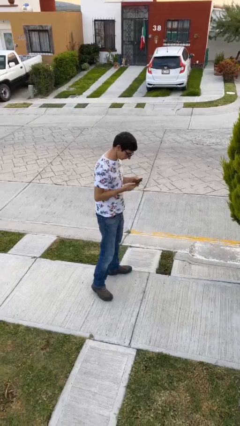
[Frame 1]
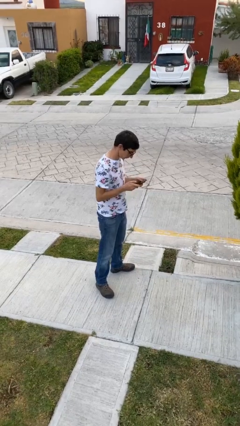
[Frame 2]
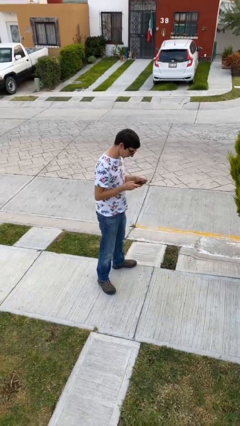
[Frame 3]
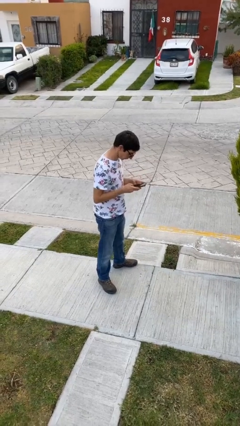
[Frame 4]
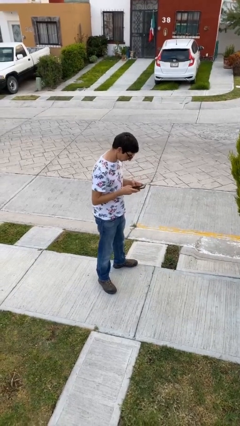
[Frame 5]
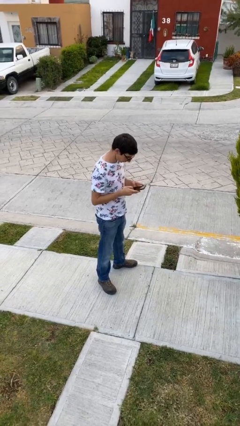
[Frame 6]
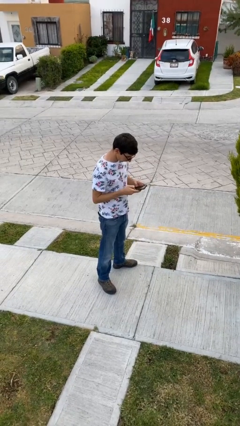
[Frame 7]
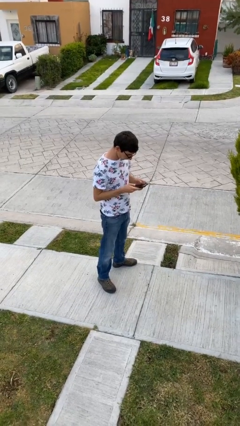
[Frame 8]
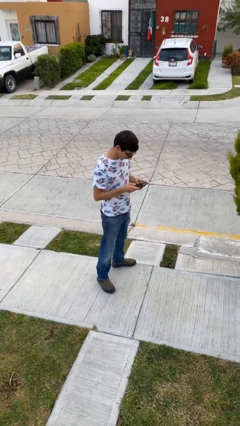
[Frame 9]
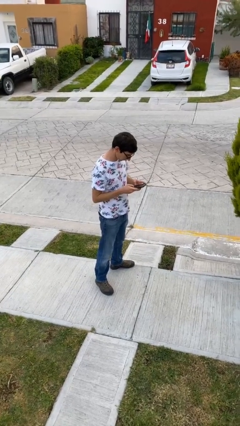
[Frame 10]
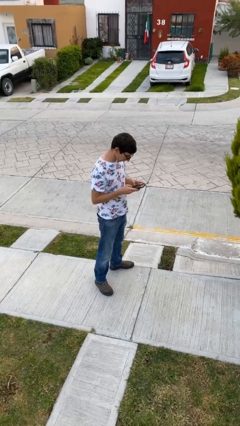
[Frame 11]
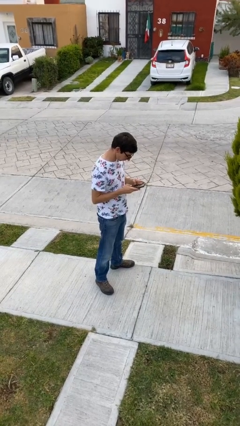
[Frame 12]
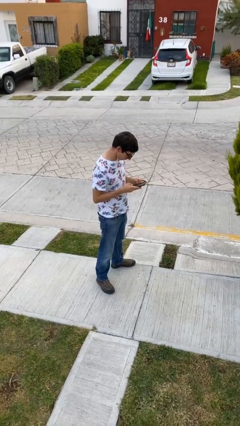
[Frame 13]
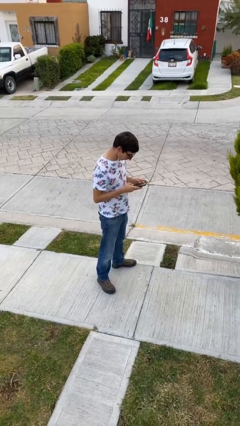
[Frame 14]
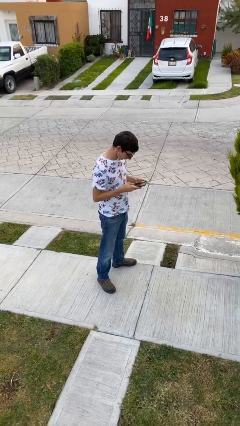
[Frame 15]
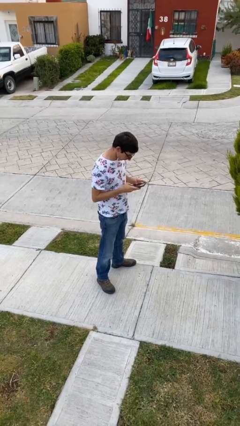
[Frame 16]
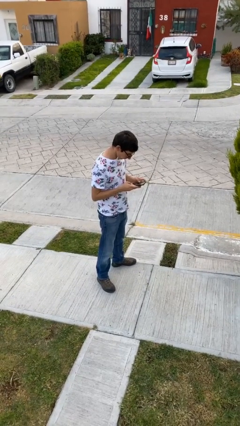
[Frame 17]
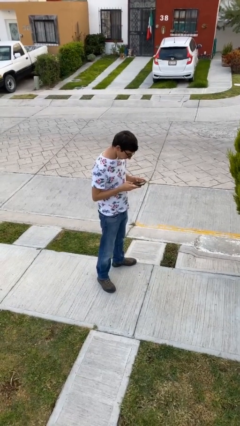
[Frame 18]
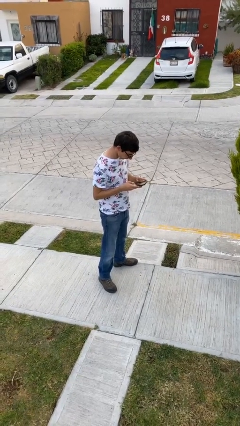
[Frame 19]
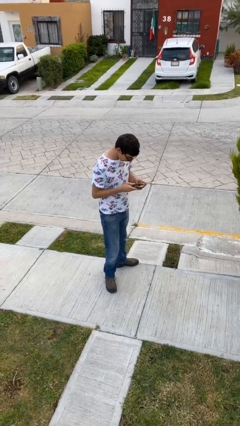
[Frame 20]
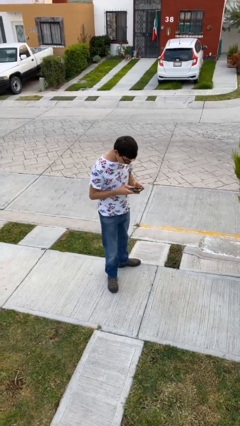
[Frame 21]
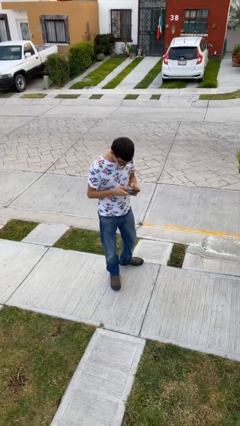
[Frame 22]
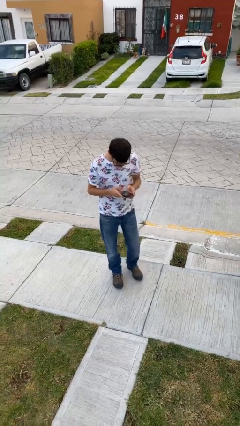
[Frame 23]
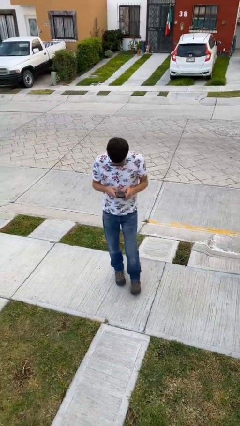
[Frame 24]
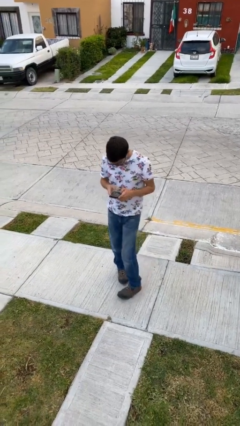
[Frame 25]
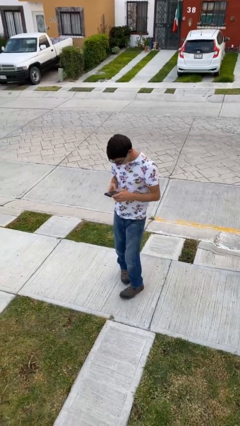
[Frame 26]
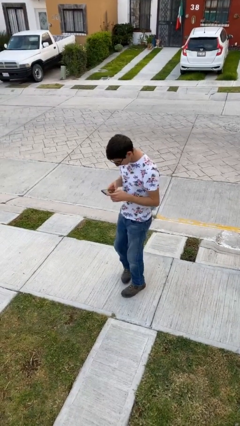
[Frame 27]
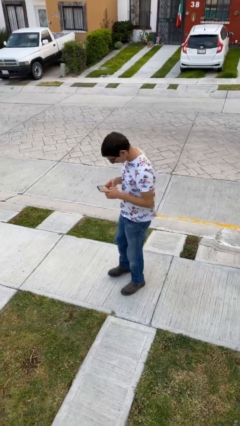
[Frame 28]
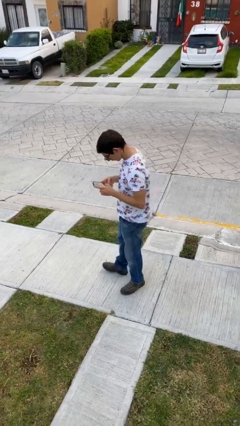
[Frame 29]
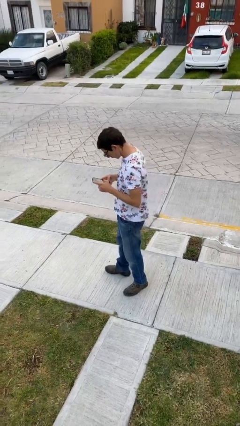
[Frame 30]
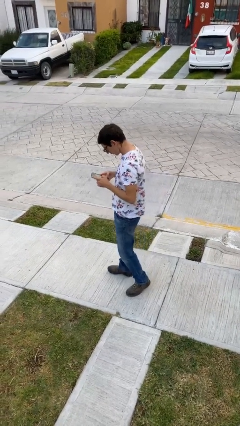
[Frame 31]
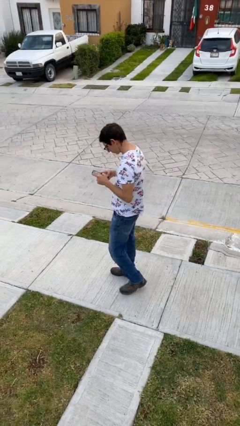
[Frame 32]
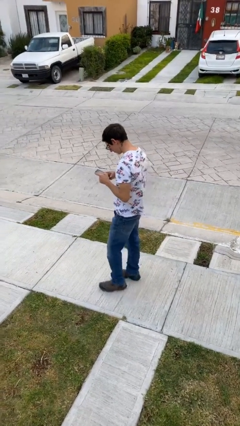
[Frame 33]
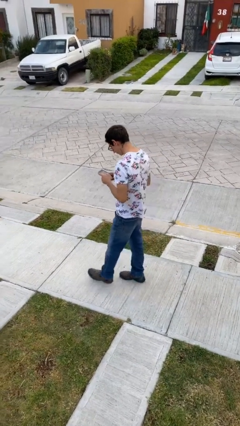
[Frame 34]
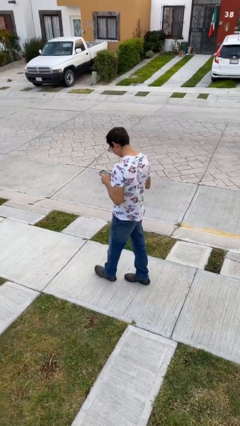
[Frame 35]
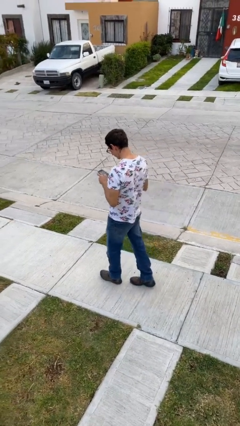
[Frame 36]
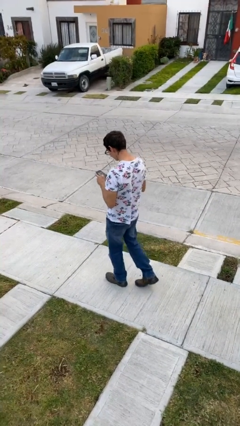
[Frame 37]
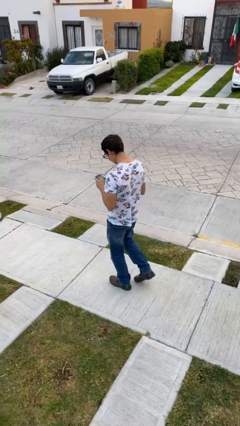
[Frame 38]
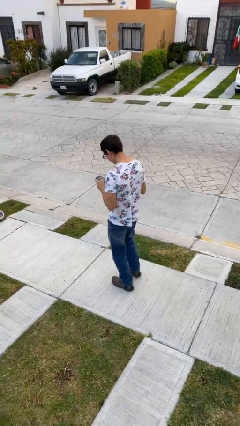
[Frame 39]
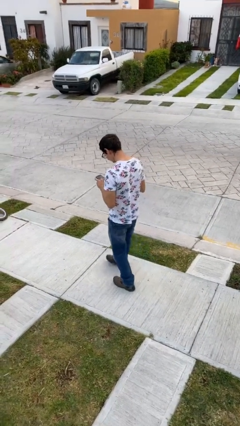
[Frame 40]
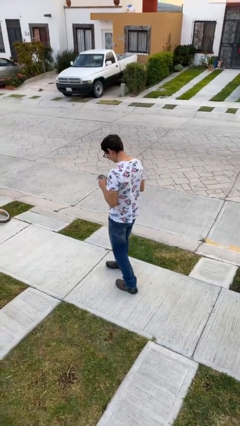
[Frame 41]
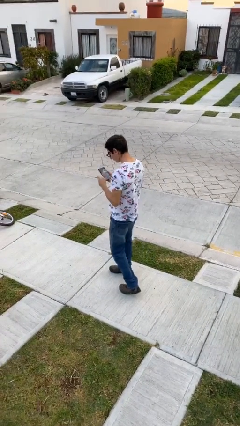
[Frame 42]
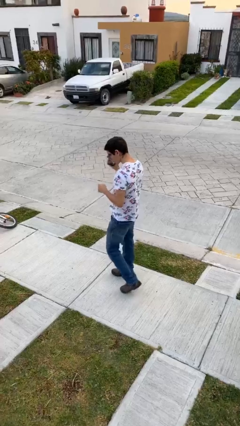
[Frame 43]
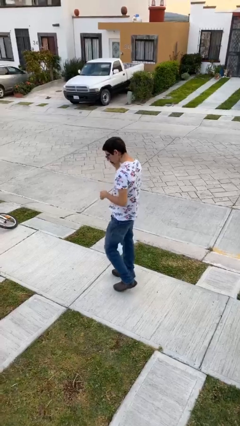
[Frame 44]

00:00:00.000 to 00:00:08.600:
person texts on phone

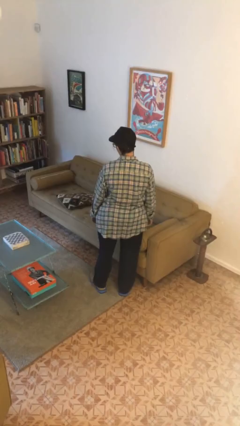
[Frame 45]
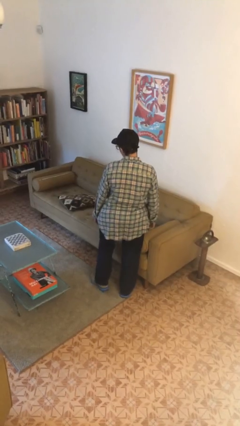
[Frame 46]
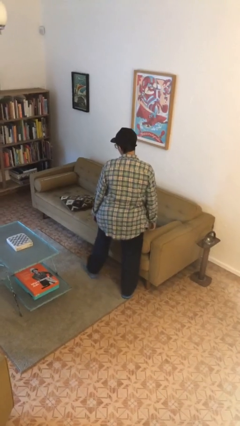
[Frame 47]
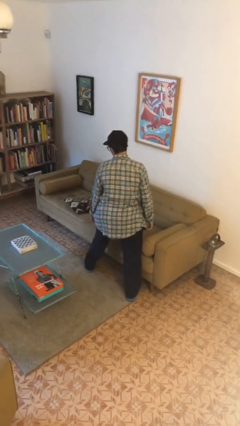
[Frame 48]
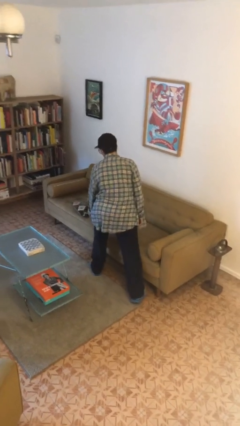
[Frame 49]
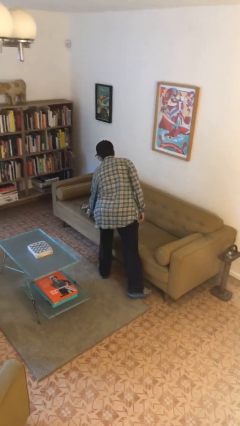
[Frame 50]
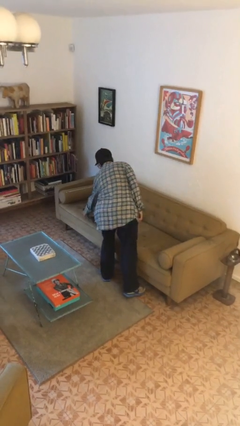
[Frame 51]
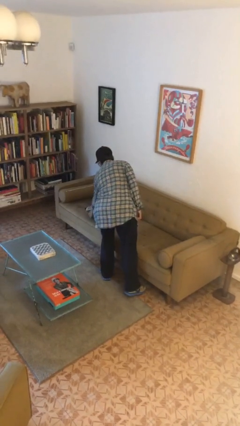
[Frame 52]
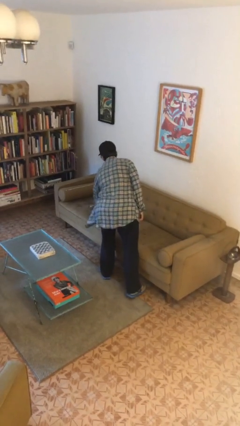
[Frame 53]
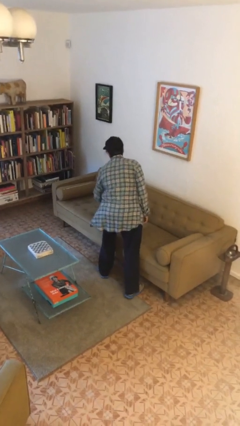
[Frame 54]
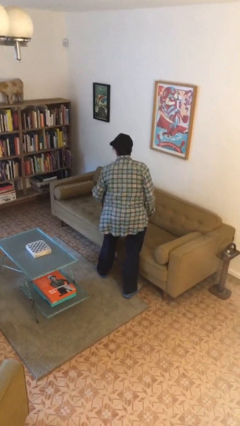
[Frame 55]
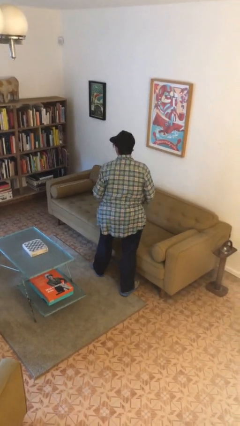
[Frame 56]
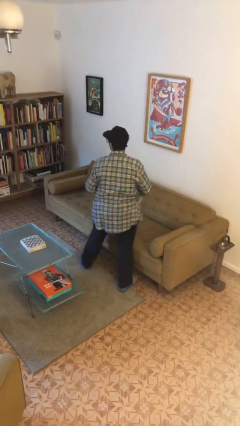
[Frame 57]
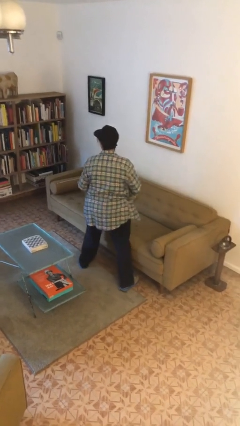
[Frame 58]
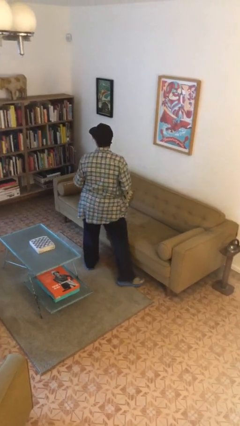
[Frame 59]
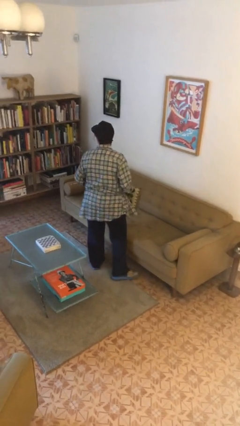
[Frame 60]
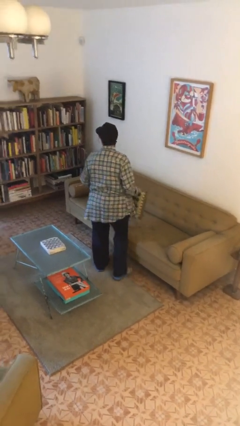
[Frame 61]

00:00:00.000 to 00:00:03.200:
person picks up object from couch

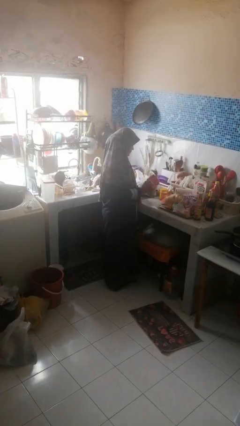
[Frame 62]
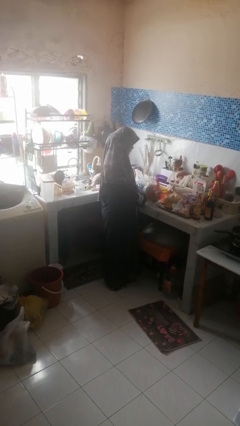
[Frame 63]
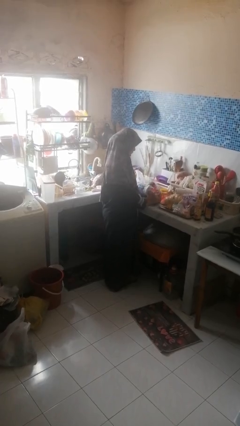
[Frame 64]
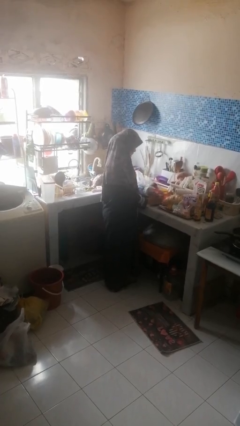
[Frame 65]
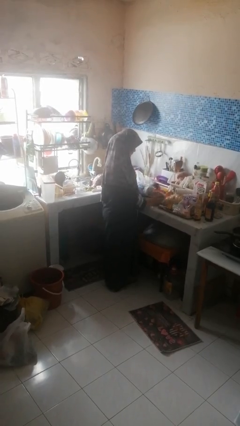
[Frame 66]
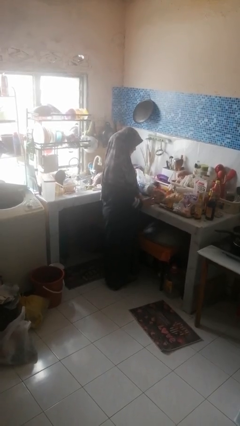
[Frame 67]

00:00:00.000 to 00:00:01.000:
person puts down object on countertop

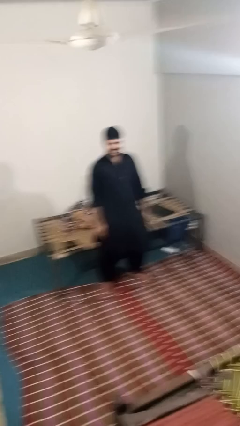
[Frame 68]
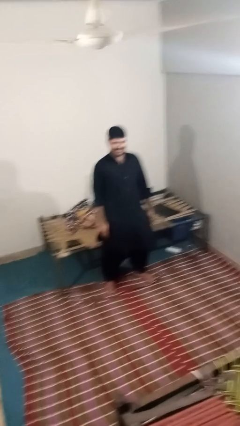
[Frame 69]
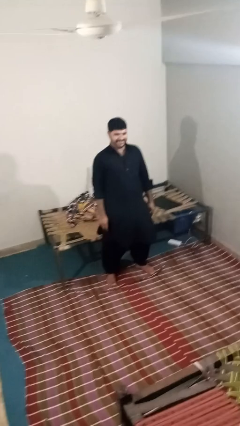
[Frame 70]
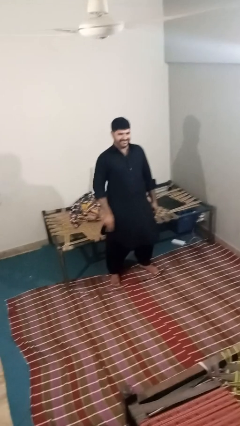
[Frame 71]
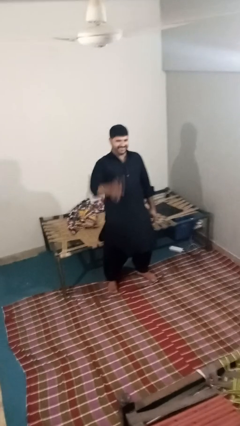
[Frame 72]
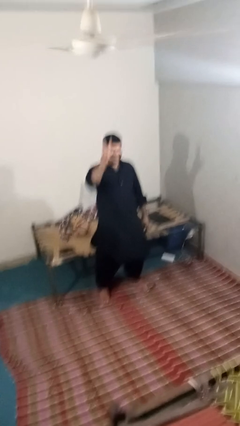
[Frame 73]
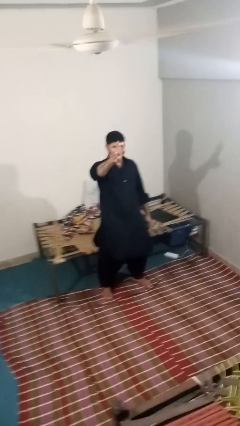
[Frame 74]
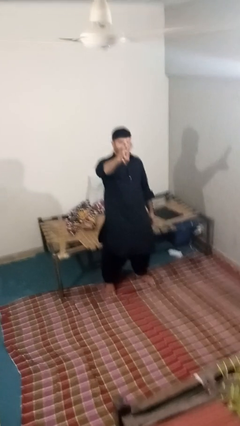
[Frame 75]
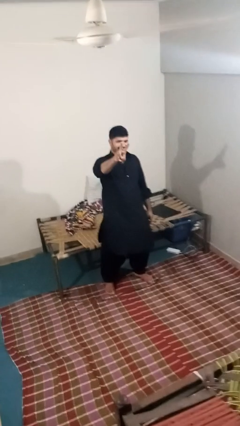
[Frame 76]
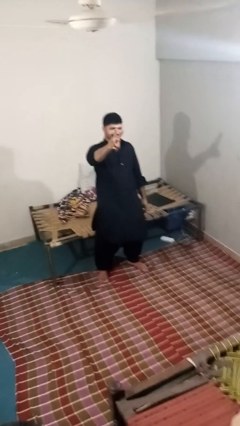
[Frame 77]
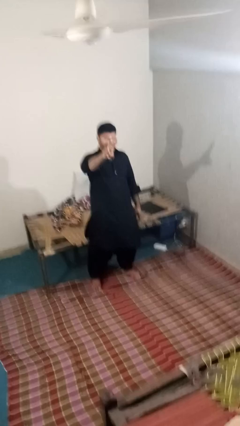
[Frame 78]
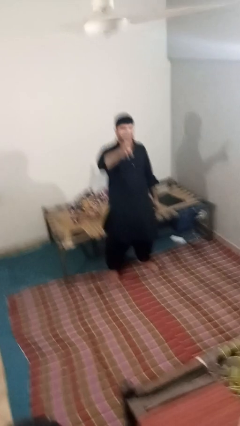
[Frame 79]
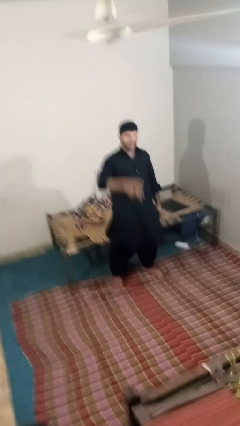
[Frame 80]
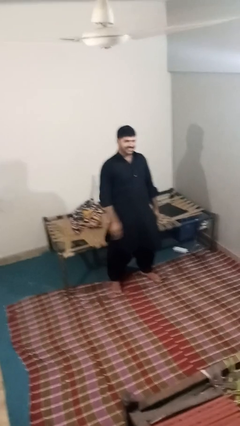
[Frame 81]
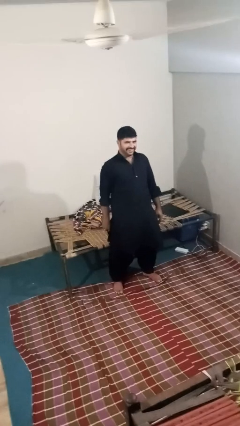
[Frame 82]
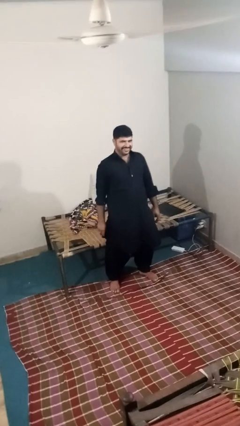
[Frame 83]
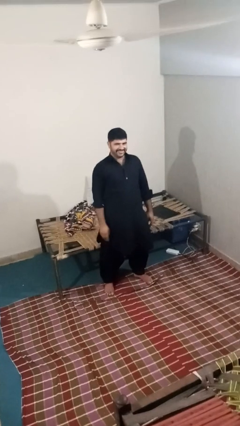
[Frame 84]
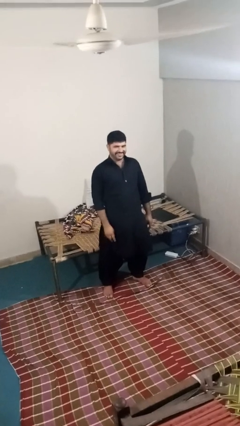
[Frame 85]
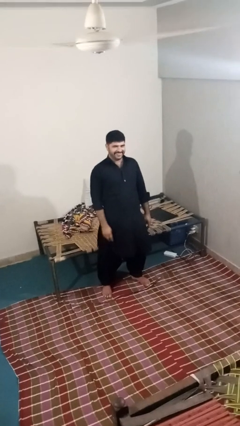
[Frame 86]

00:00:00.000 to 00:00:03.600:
person gestures peace

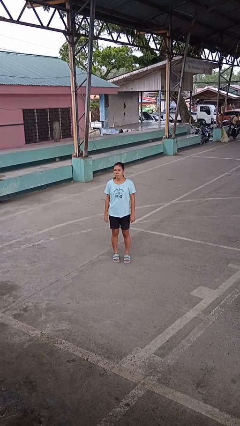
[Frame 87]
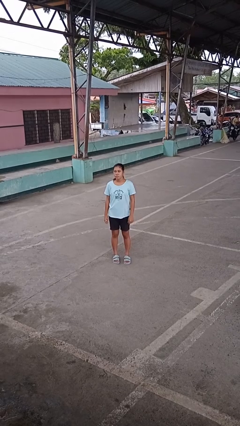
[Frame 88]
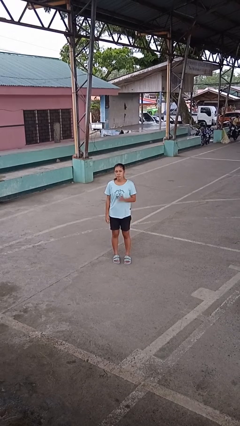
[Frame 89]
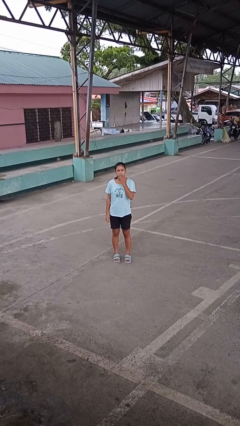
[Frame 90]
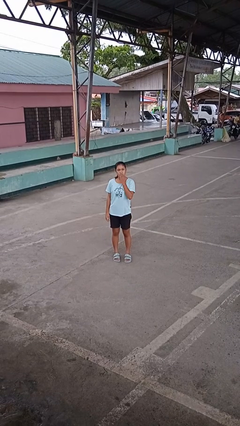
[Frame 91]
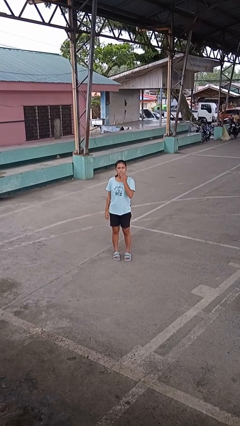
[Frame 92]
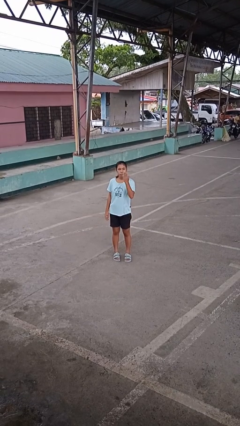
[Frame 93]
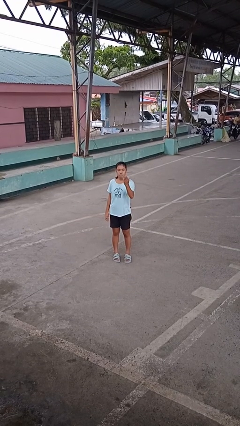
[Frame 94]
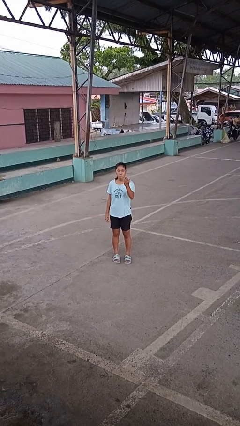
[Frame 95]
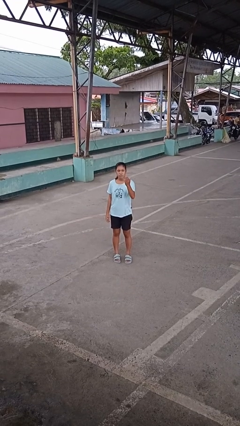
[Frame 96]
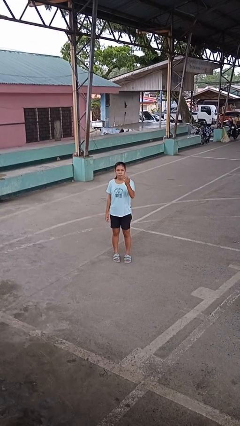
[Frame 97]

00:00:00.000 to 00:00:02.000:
person gestures blow kiss
